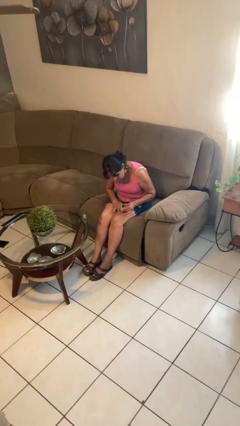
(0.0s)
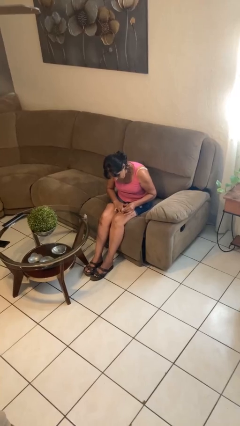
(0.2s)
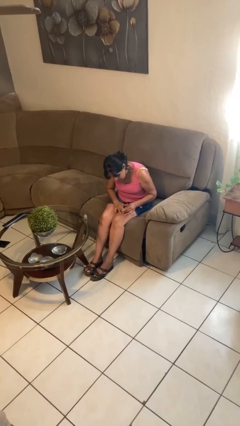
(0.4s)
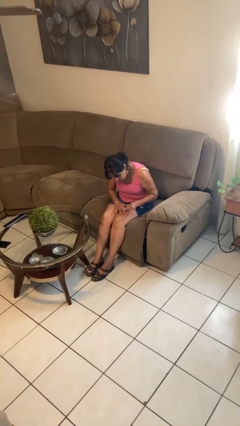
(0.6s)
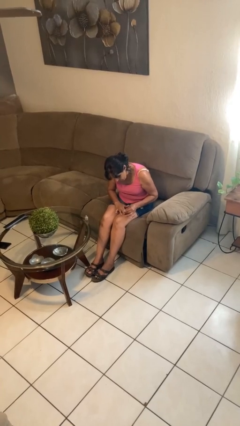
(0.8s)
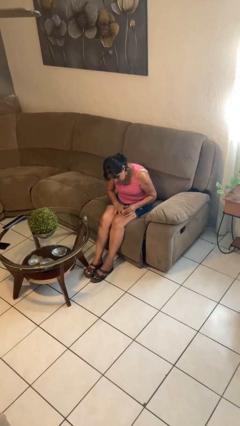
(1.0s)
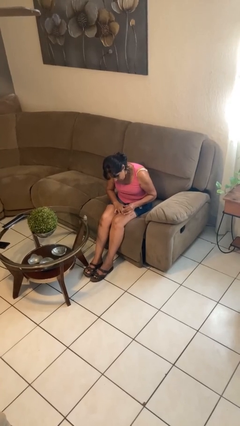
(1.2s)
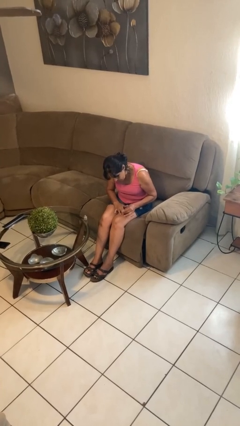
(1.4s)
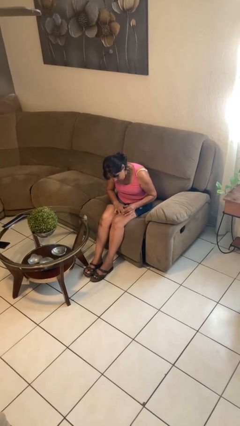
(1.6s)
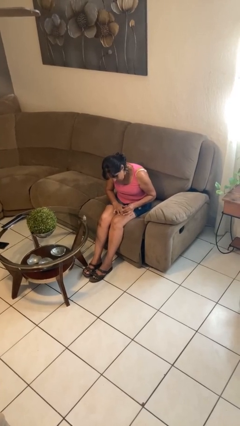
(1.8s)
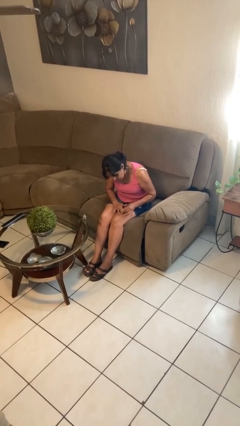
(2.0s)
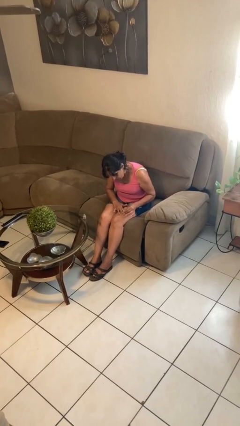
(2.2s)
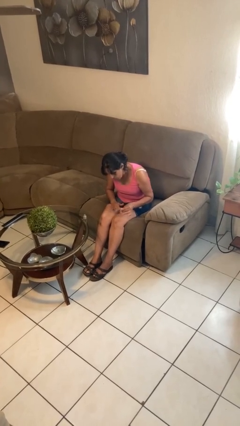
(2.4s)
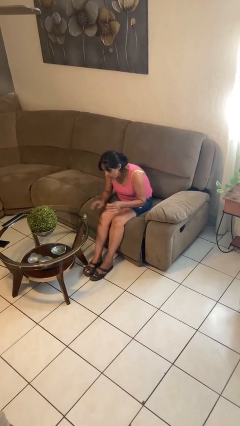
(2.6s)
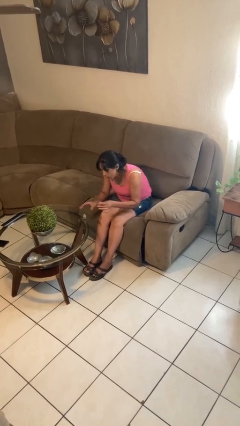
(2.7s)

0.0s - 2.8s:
person paints fingernails

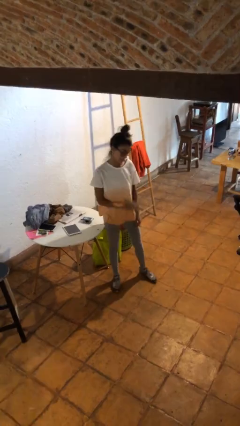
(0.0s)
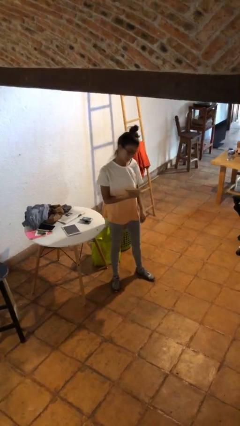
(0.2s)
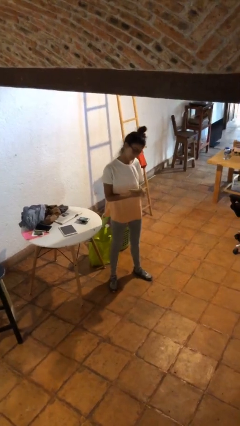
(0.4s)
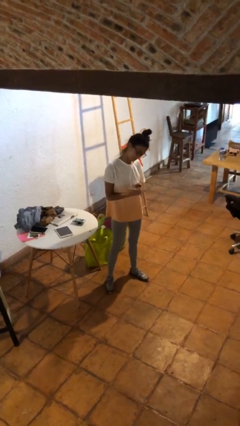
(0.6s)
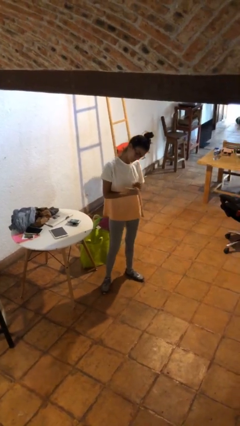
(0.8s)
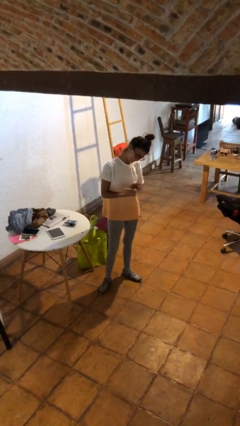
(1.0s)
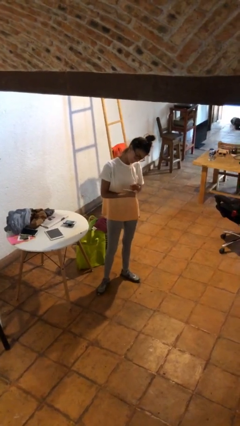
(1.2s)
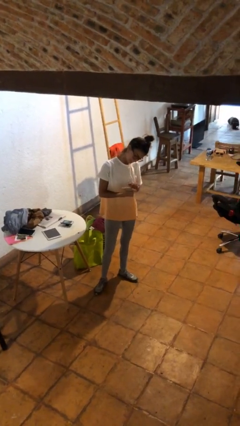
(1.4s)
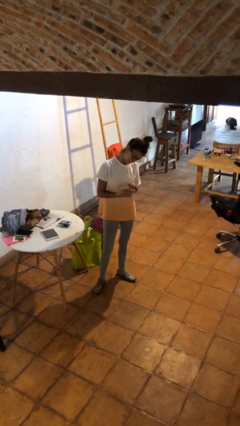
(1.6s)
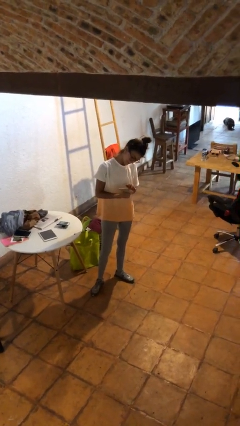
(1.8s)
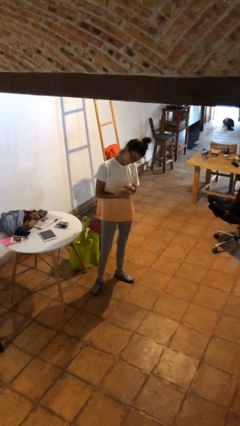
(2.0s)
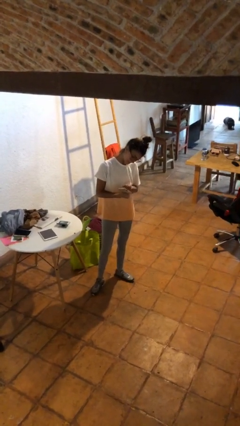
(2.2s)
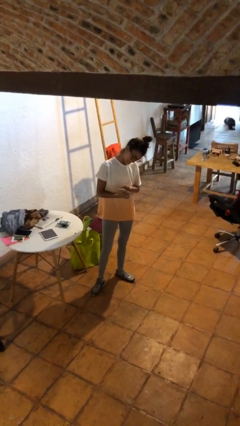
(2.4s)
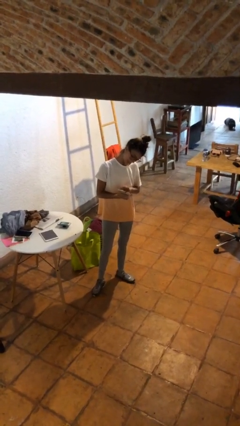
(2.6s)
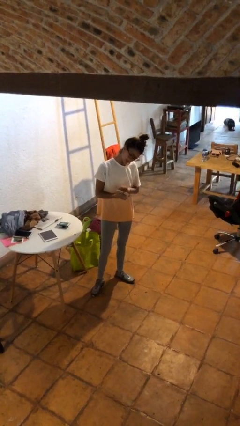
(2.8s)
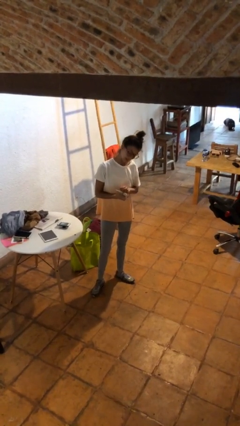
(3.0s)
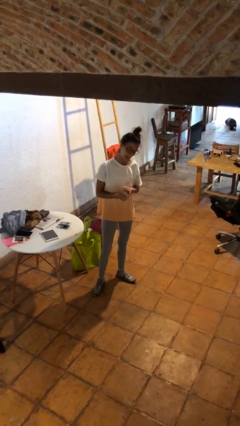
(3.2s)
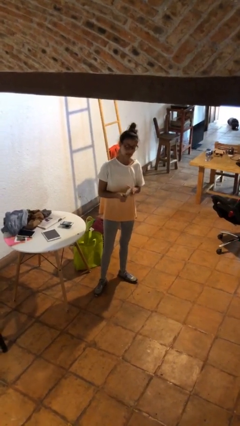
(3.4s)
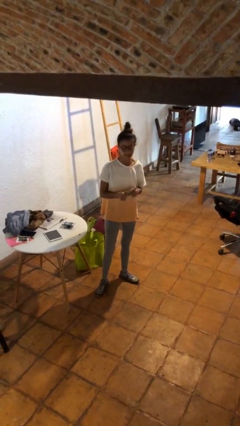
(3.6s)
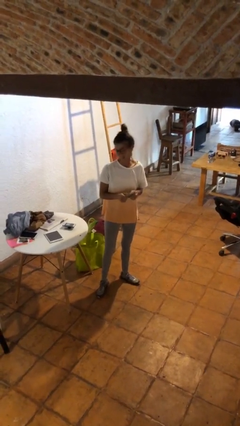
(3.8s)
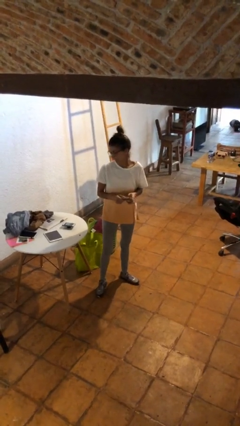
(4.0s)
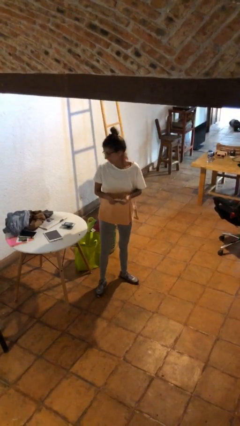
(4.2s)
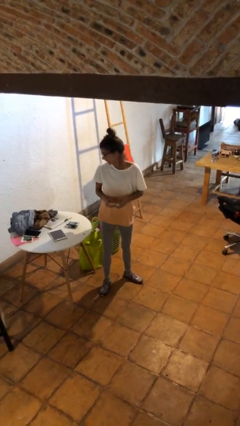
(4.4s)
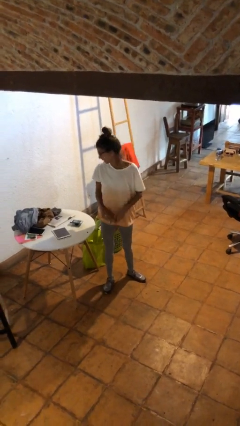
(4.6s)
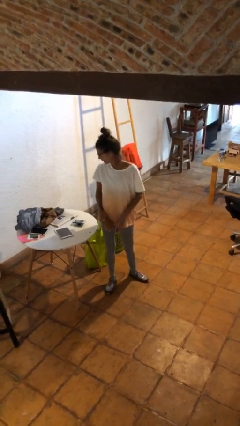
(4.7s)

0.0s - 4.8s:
person taps object with finger

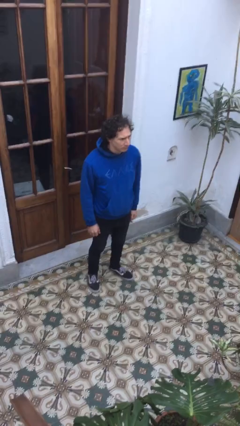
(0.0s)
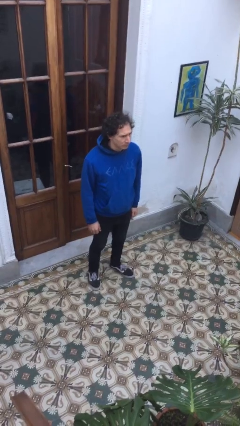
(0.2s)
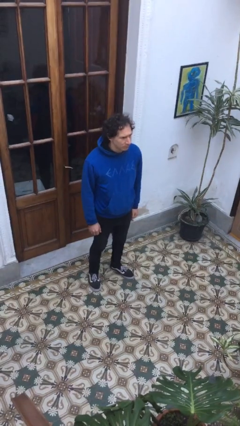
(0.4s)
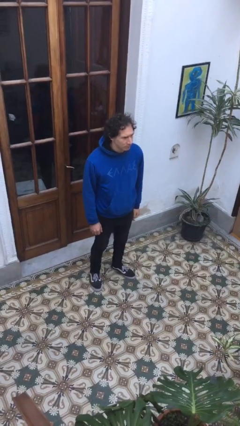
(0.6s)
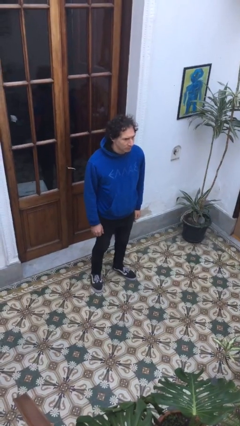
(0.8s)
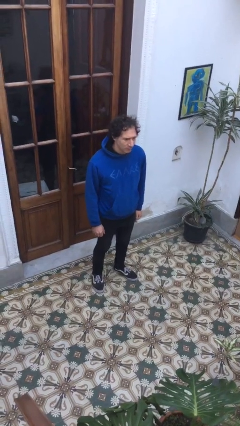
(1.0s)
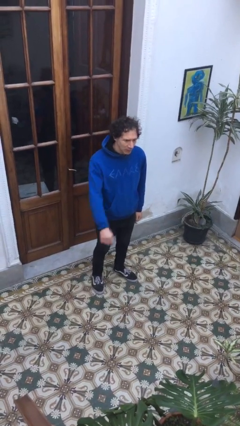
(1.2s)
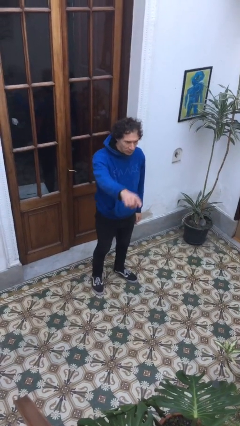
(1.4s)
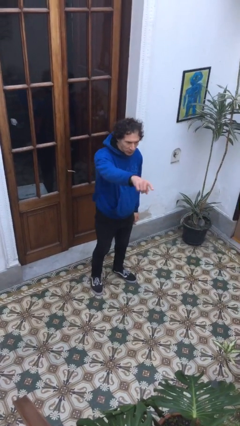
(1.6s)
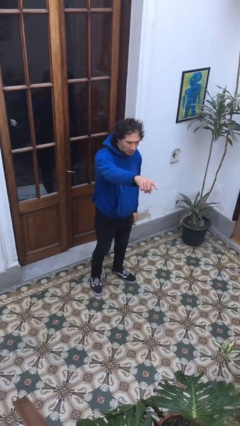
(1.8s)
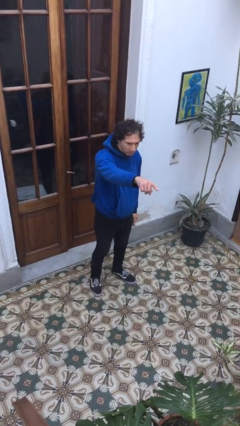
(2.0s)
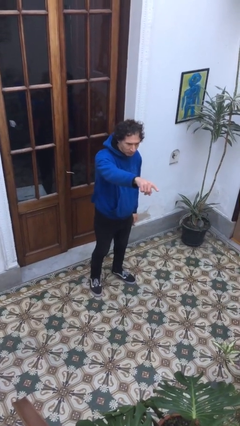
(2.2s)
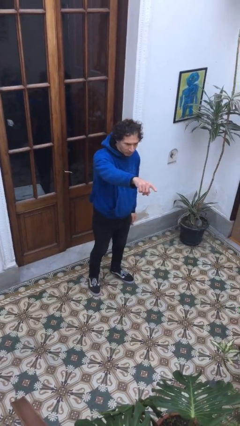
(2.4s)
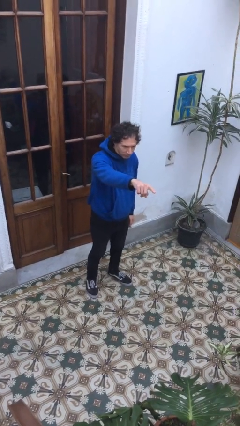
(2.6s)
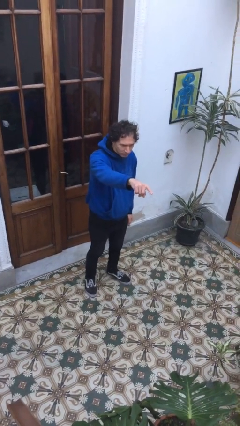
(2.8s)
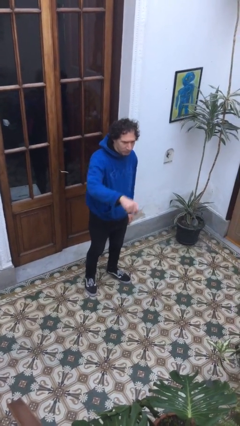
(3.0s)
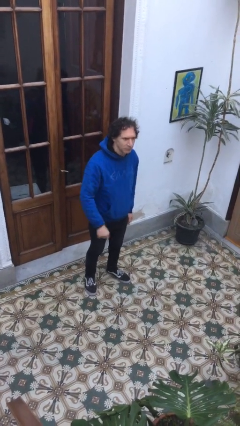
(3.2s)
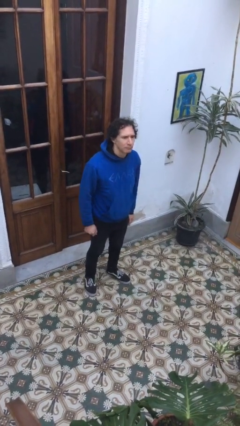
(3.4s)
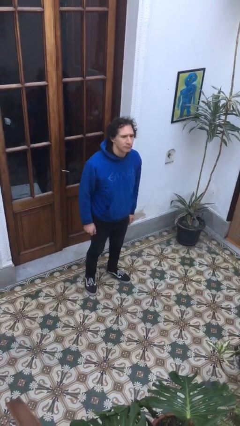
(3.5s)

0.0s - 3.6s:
person points at person

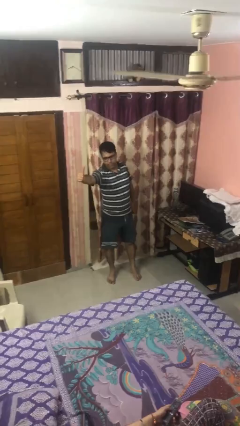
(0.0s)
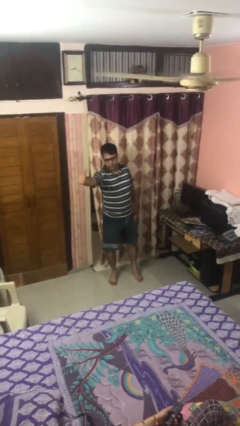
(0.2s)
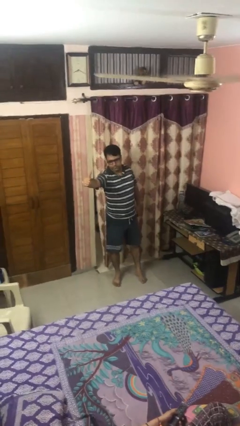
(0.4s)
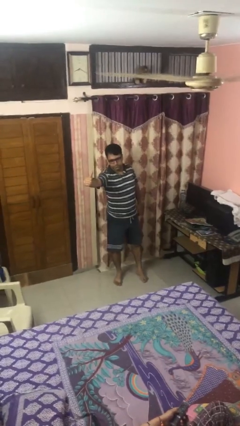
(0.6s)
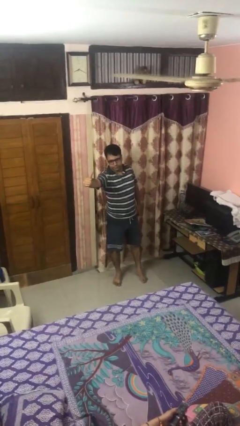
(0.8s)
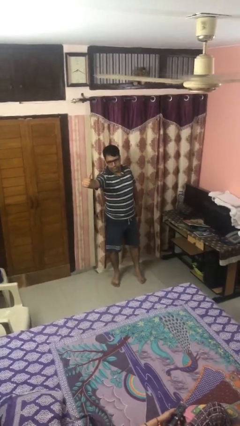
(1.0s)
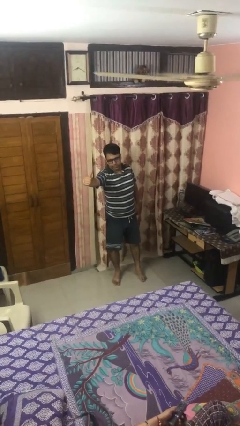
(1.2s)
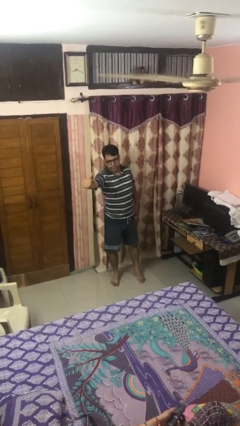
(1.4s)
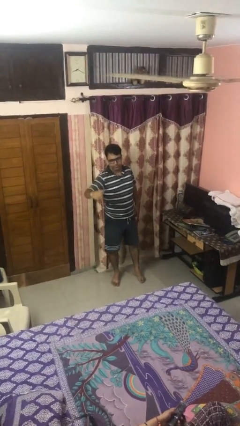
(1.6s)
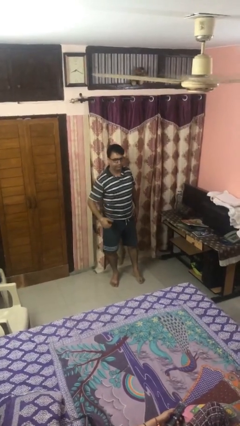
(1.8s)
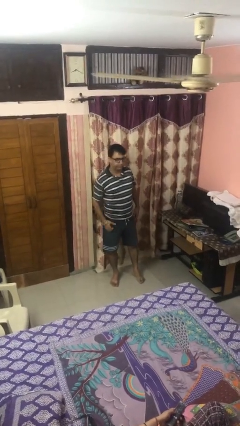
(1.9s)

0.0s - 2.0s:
person gestures thumbs up

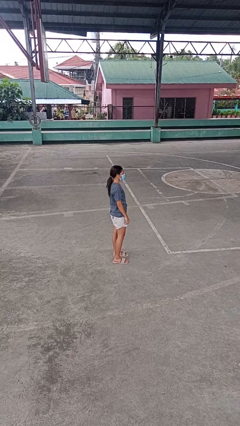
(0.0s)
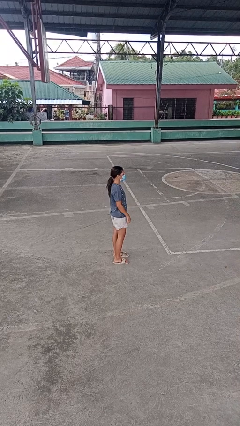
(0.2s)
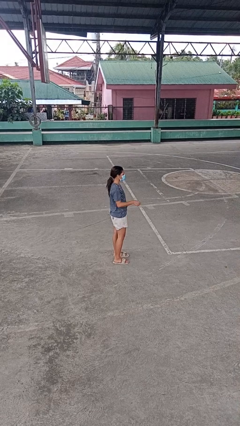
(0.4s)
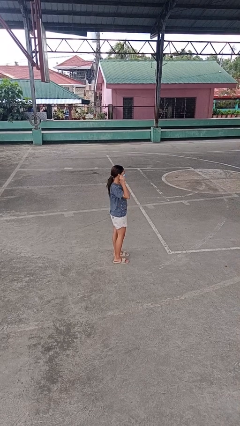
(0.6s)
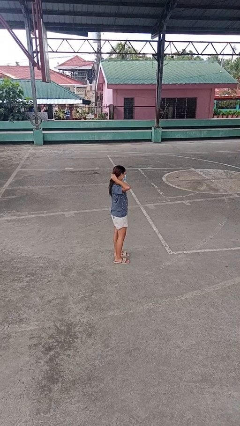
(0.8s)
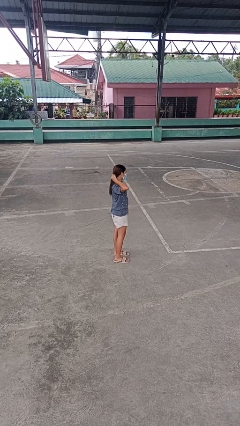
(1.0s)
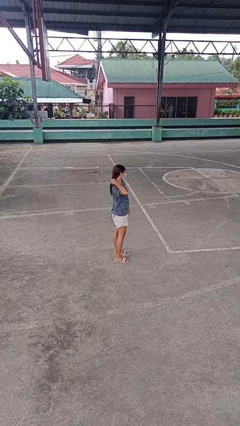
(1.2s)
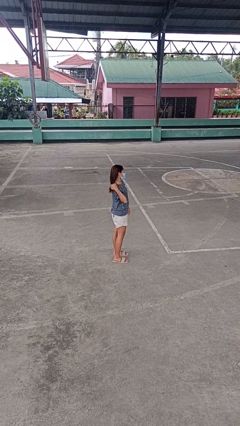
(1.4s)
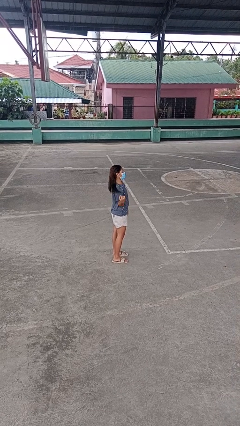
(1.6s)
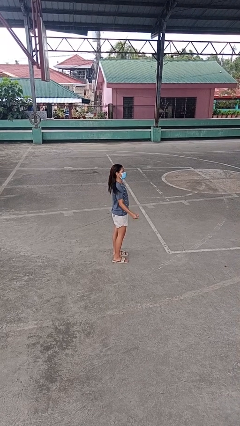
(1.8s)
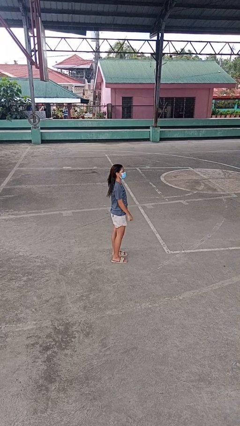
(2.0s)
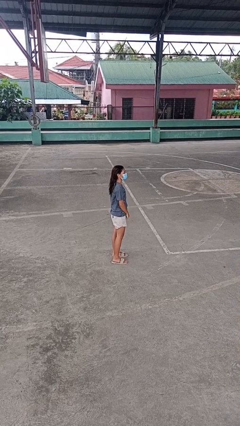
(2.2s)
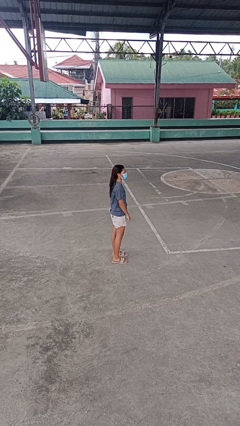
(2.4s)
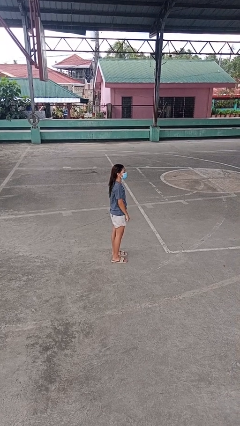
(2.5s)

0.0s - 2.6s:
person takes off hairtie

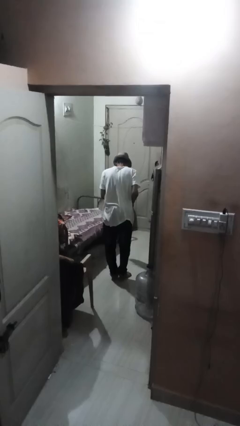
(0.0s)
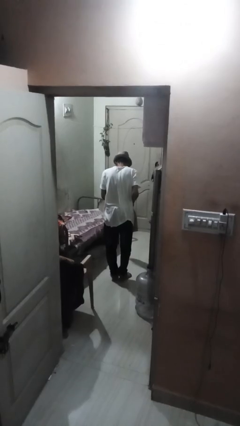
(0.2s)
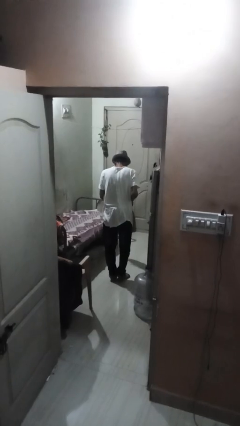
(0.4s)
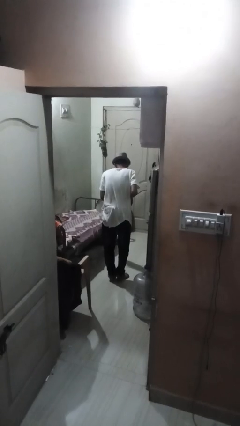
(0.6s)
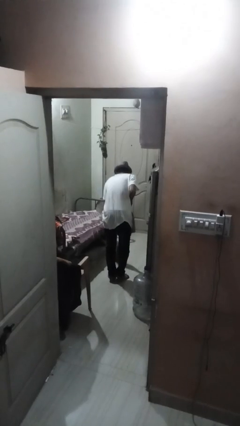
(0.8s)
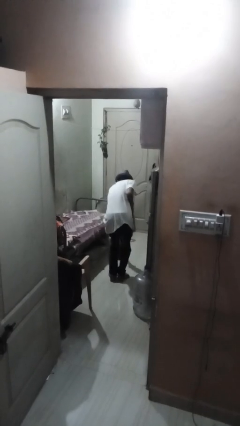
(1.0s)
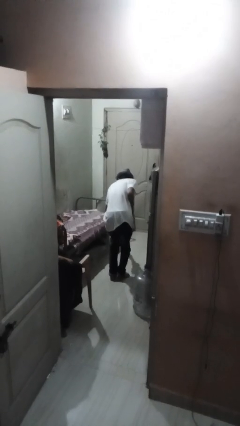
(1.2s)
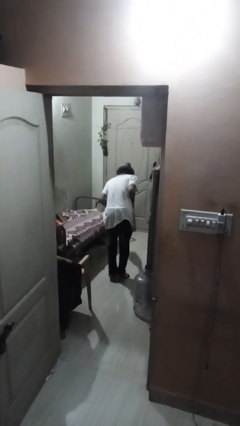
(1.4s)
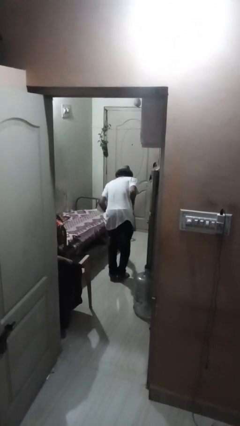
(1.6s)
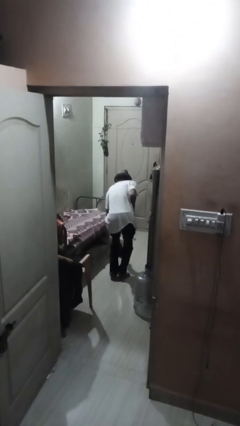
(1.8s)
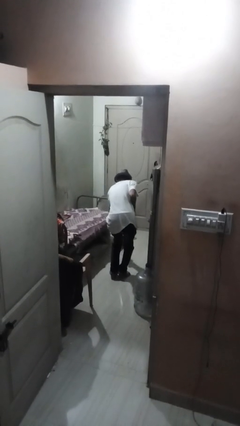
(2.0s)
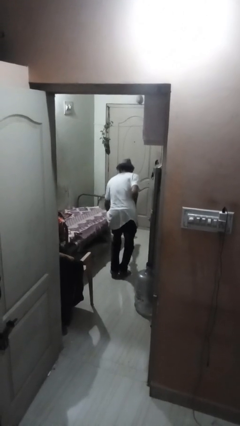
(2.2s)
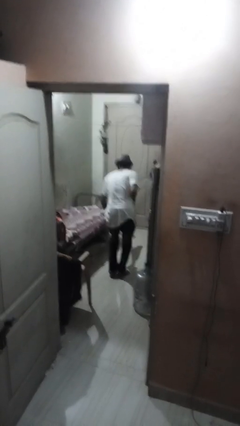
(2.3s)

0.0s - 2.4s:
person mops
